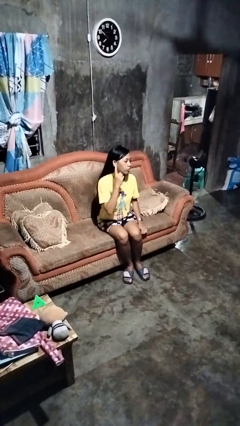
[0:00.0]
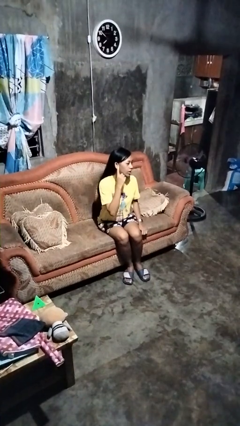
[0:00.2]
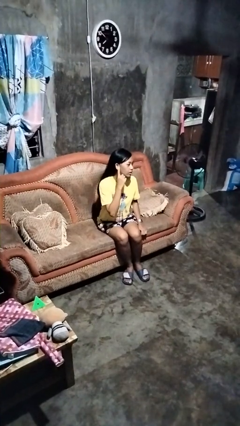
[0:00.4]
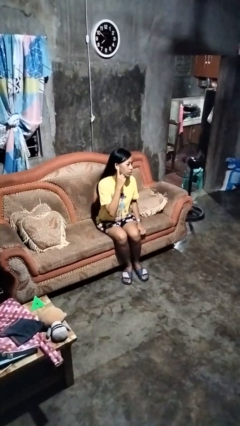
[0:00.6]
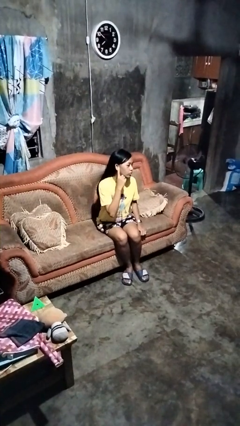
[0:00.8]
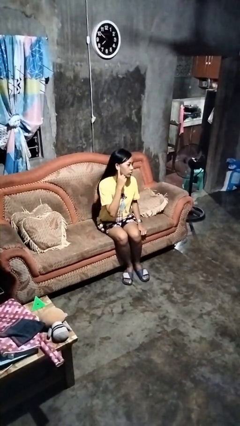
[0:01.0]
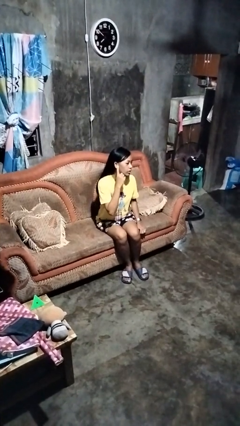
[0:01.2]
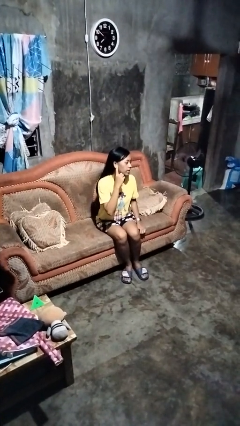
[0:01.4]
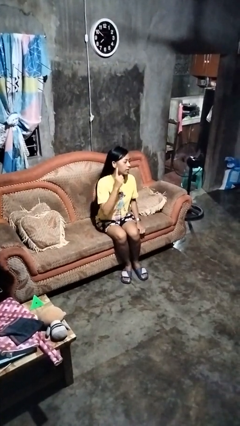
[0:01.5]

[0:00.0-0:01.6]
person gestures listen closely

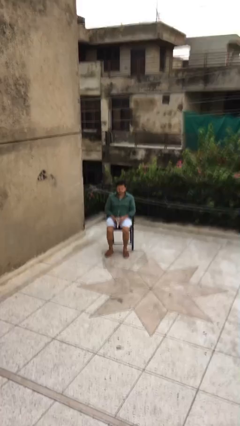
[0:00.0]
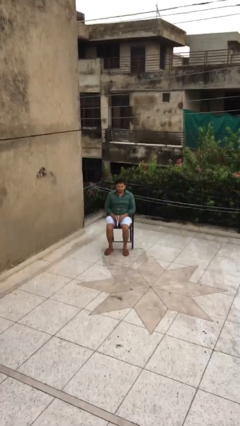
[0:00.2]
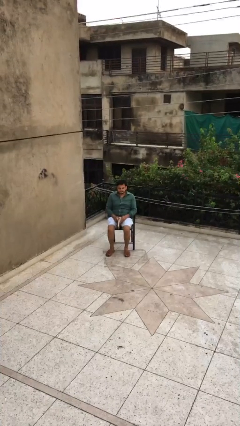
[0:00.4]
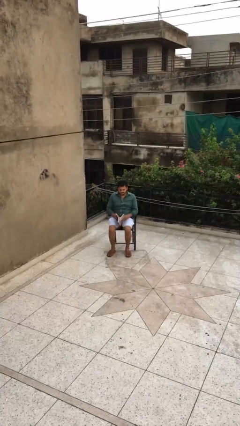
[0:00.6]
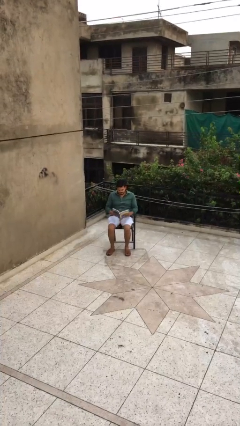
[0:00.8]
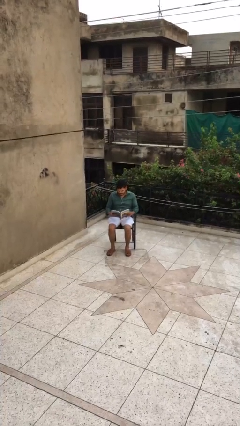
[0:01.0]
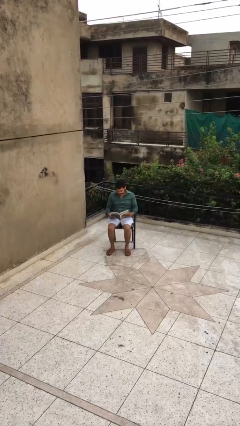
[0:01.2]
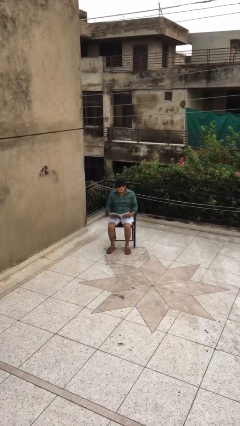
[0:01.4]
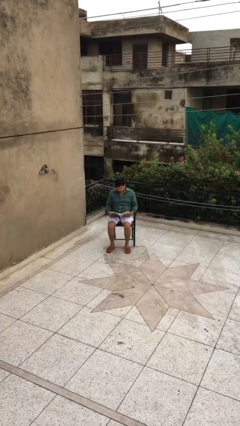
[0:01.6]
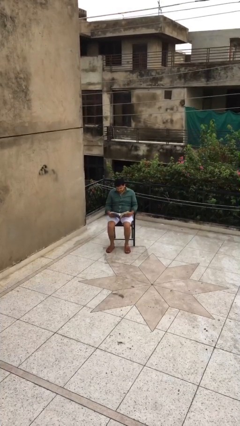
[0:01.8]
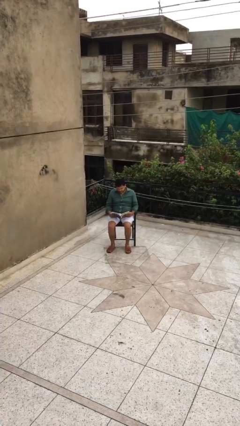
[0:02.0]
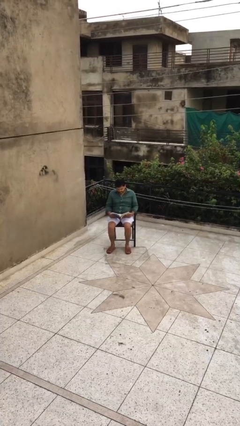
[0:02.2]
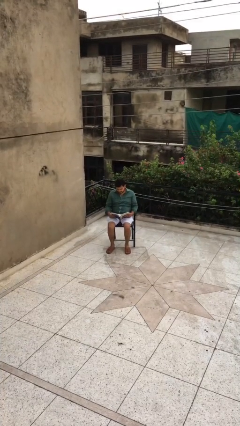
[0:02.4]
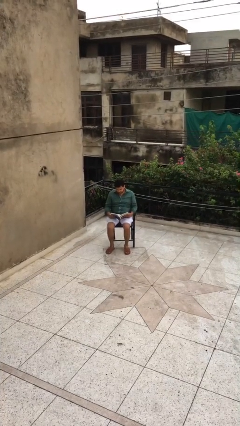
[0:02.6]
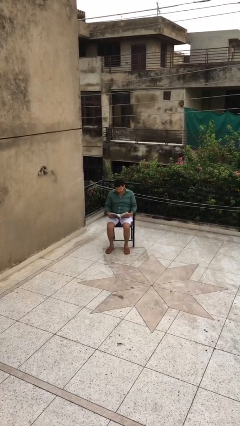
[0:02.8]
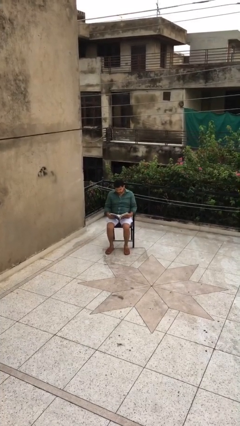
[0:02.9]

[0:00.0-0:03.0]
person reads document

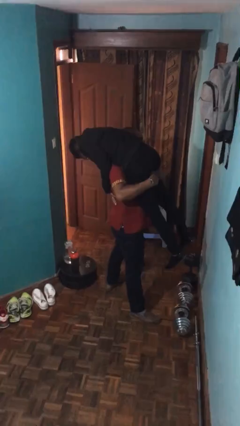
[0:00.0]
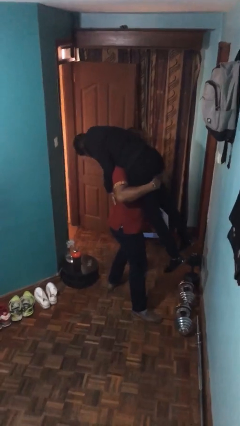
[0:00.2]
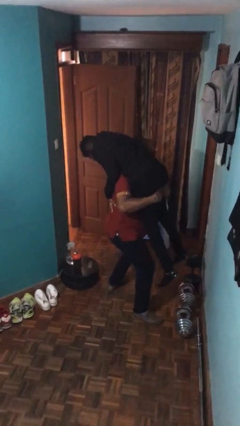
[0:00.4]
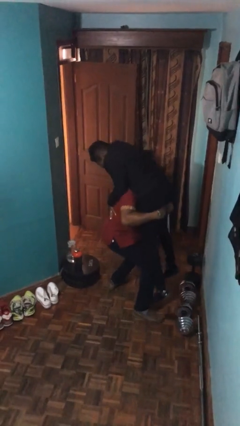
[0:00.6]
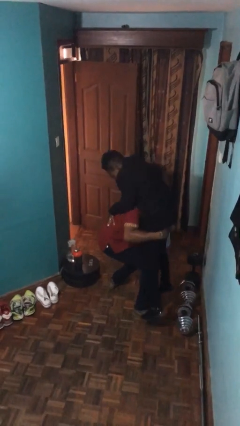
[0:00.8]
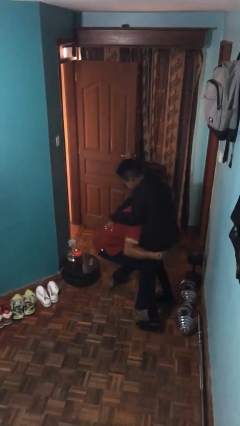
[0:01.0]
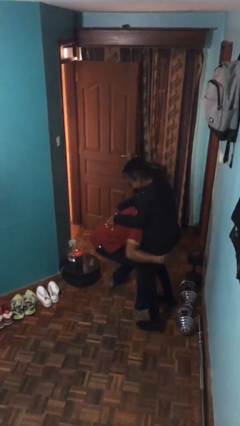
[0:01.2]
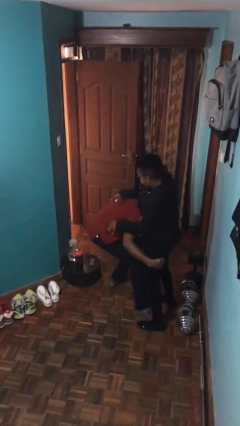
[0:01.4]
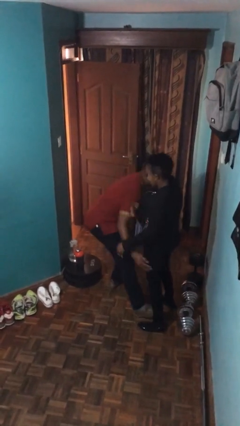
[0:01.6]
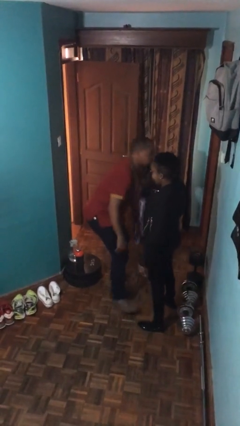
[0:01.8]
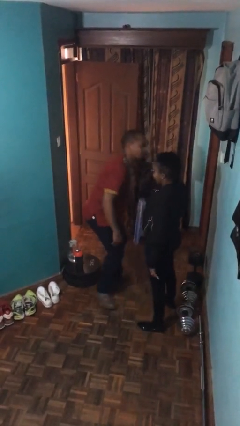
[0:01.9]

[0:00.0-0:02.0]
person puts down person

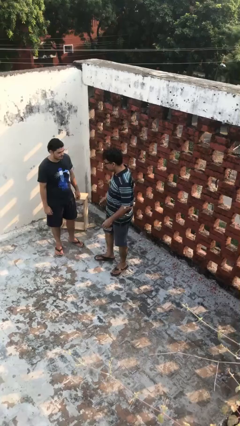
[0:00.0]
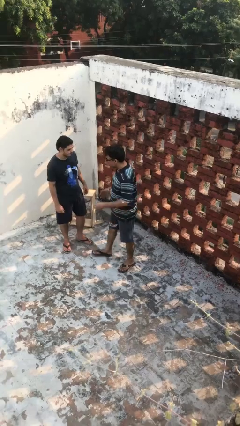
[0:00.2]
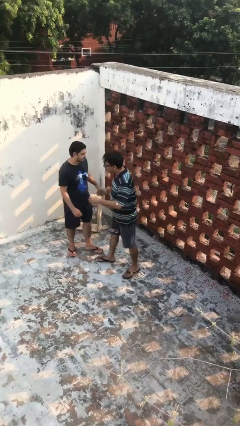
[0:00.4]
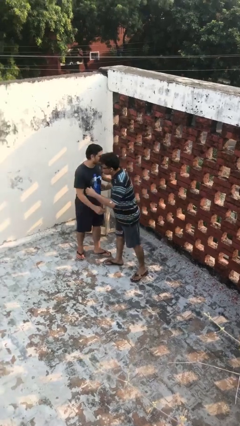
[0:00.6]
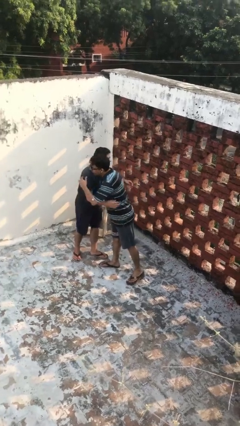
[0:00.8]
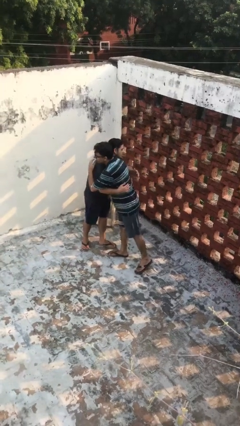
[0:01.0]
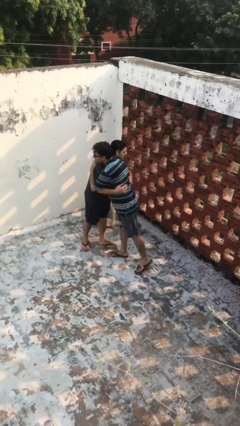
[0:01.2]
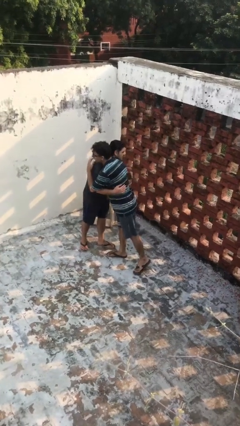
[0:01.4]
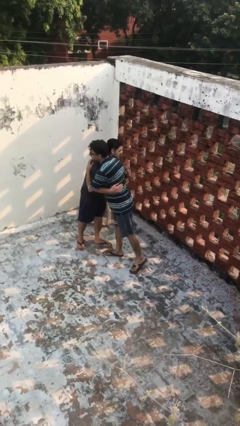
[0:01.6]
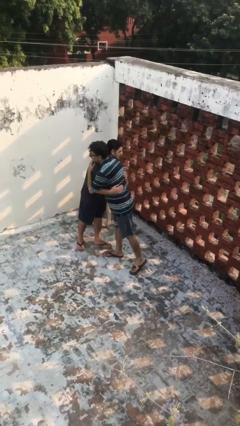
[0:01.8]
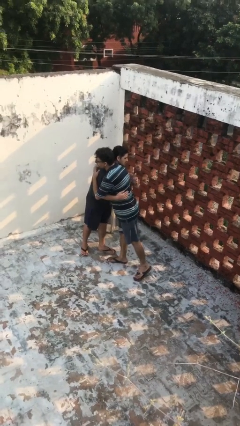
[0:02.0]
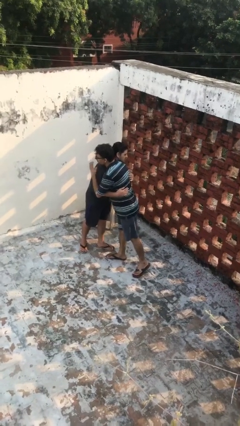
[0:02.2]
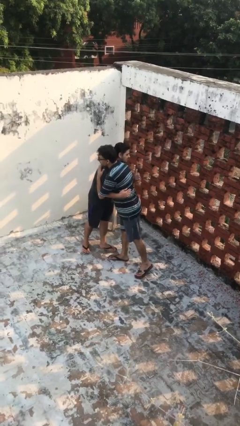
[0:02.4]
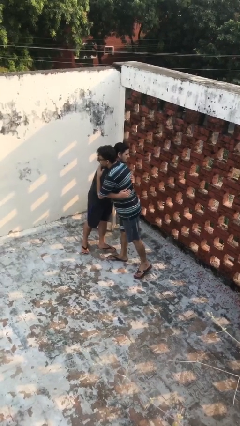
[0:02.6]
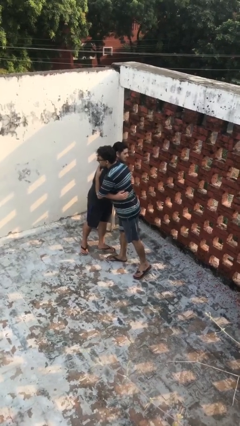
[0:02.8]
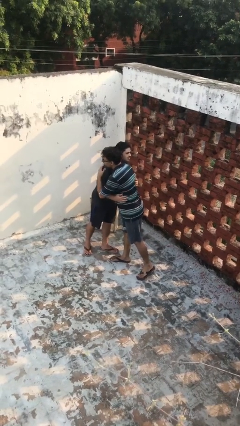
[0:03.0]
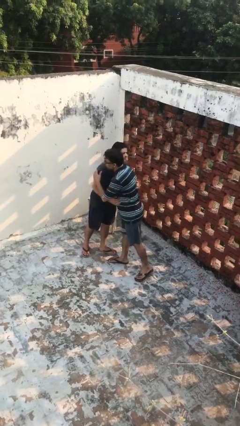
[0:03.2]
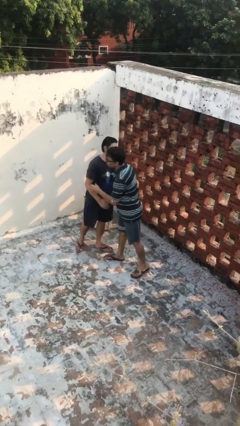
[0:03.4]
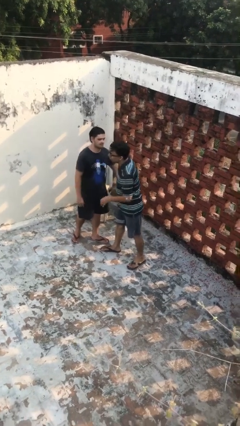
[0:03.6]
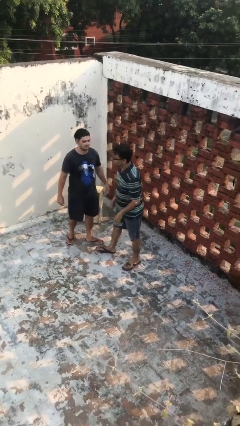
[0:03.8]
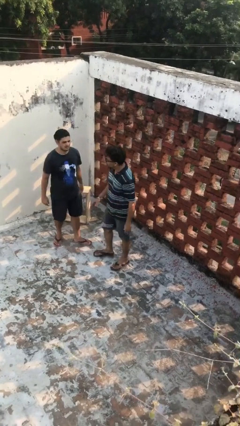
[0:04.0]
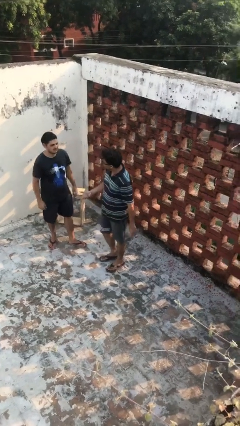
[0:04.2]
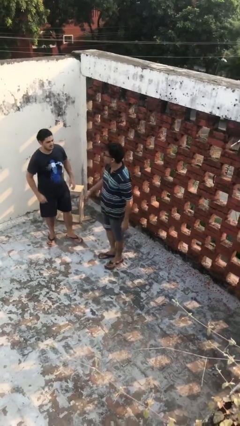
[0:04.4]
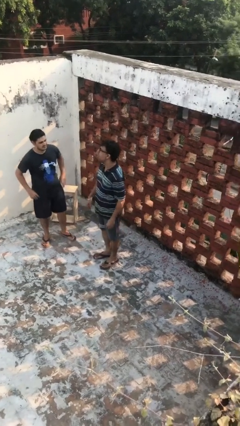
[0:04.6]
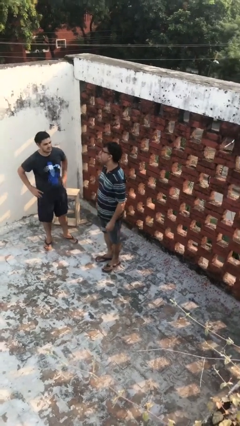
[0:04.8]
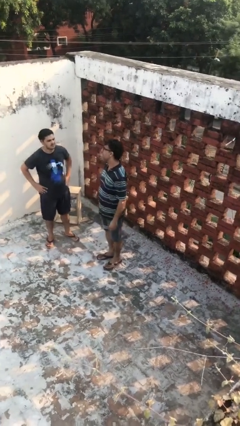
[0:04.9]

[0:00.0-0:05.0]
person embraces person

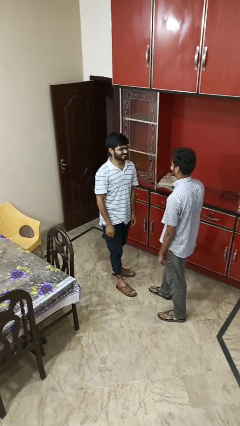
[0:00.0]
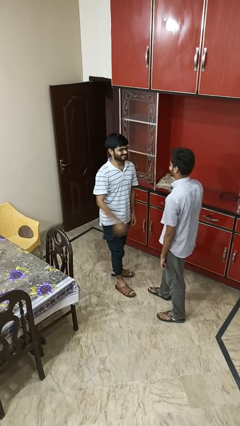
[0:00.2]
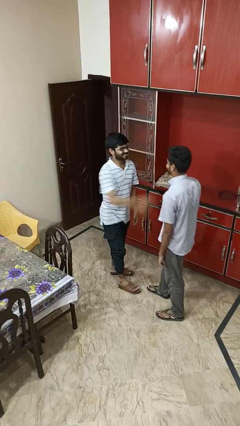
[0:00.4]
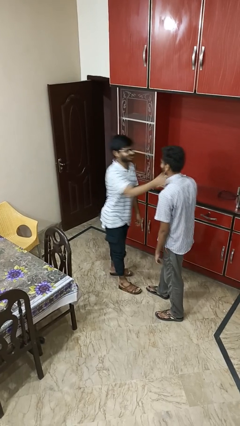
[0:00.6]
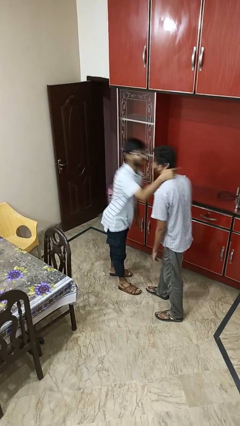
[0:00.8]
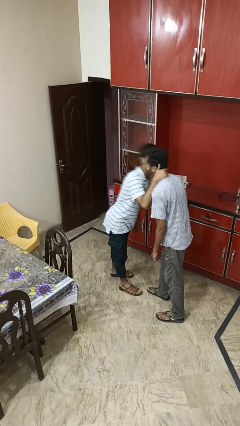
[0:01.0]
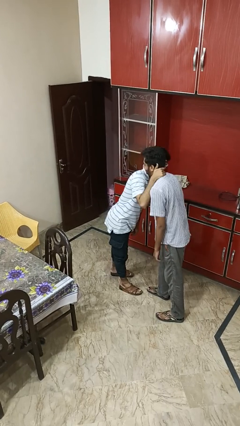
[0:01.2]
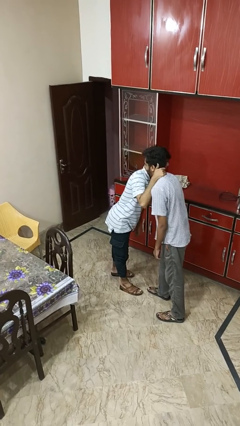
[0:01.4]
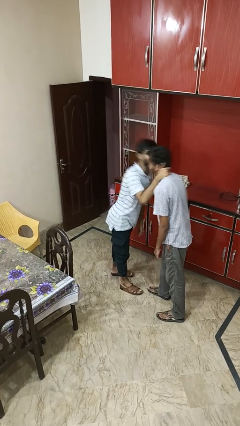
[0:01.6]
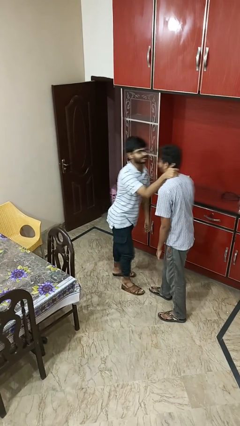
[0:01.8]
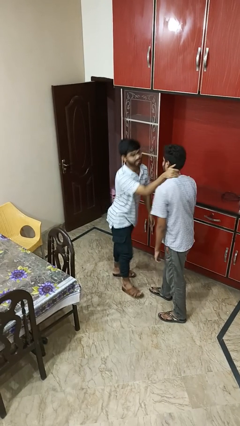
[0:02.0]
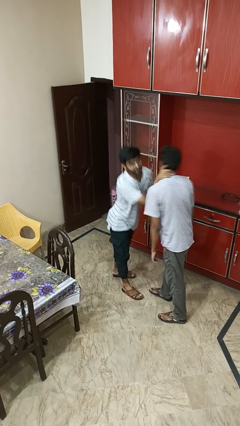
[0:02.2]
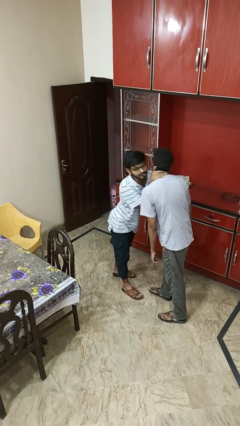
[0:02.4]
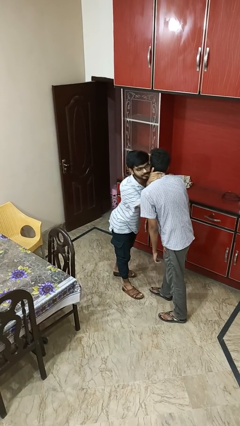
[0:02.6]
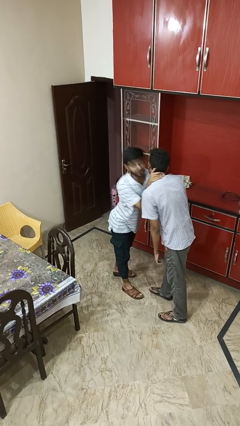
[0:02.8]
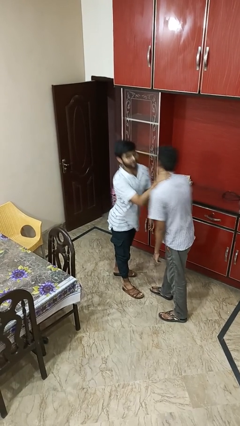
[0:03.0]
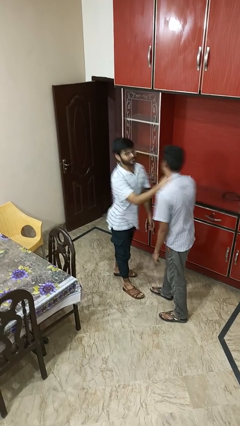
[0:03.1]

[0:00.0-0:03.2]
person kisses cheek of person

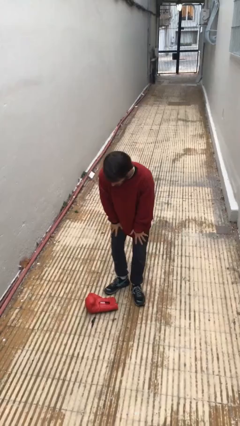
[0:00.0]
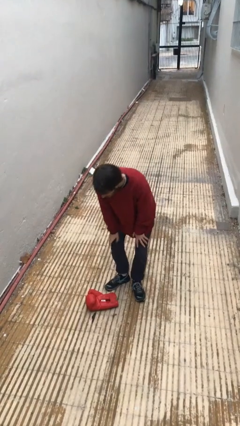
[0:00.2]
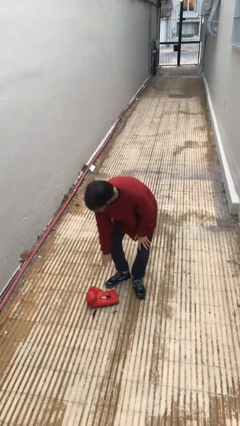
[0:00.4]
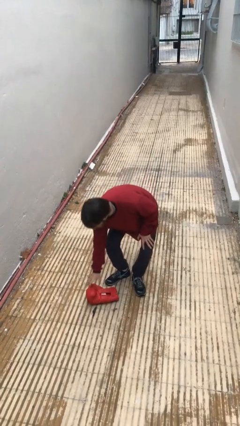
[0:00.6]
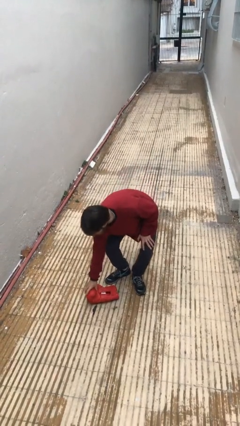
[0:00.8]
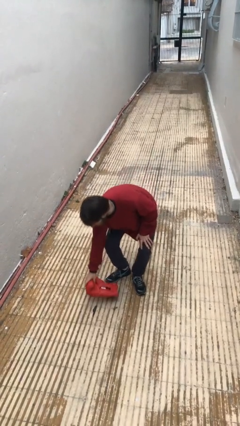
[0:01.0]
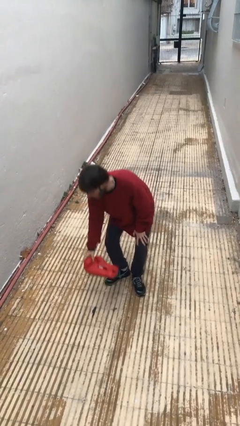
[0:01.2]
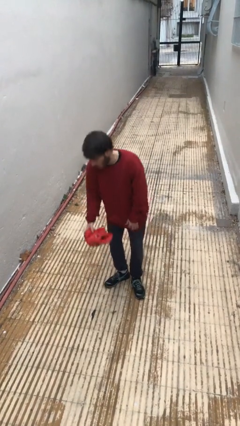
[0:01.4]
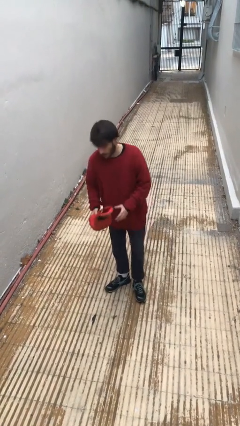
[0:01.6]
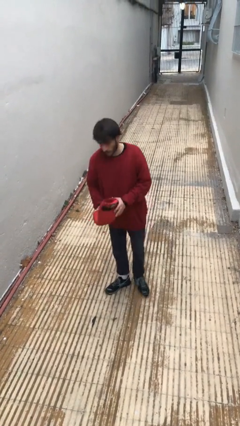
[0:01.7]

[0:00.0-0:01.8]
person picks up object from floor

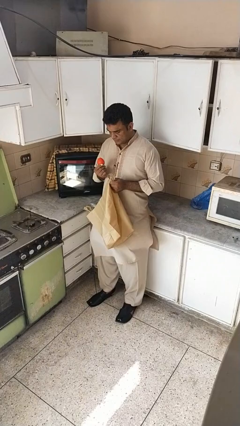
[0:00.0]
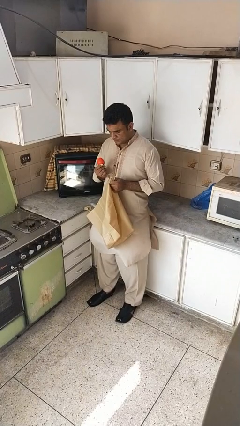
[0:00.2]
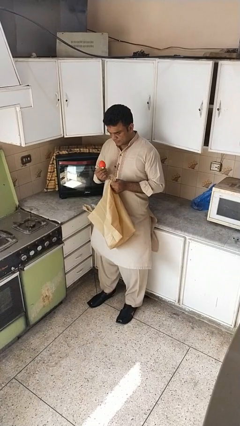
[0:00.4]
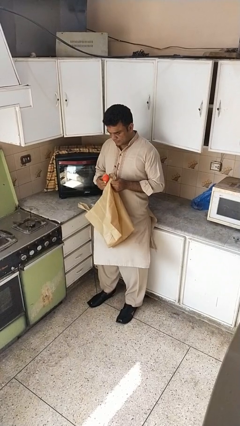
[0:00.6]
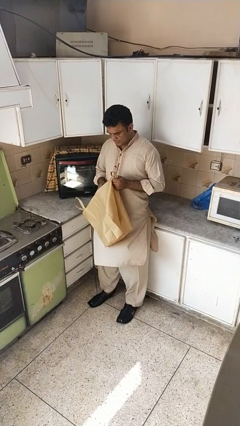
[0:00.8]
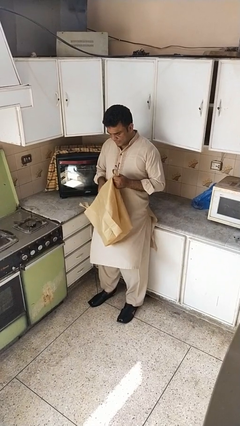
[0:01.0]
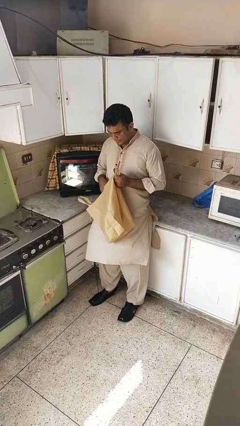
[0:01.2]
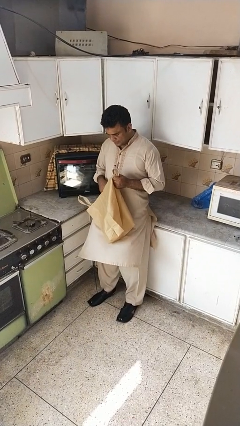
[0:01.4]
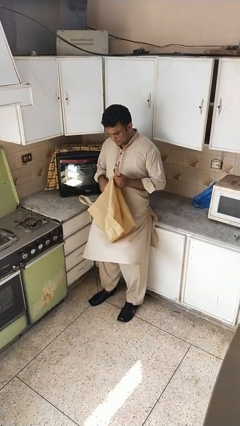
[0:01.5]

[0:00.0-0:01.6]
person puts object into bag
